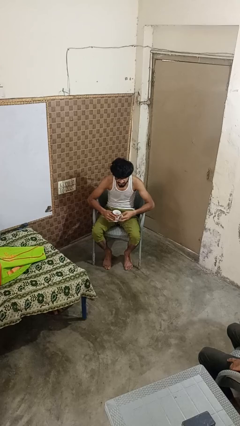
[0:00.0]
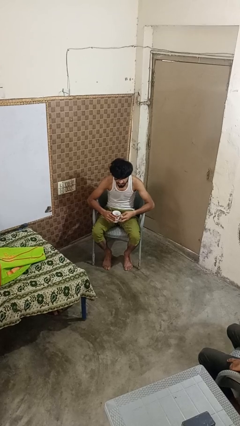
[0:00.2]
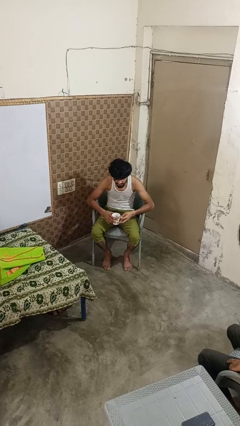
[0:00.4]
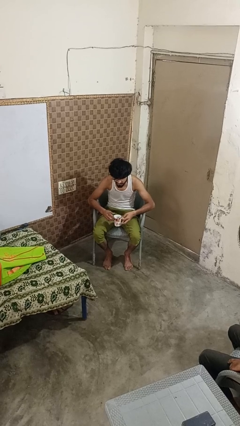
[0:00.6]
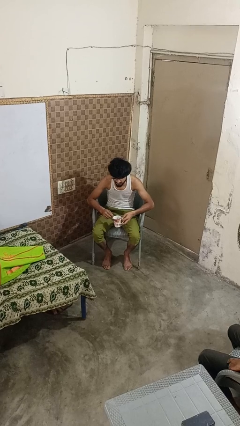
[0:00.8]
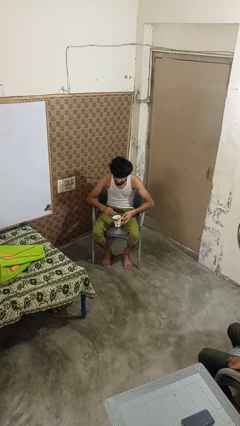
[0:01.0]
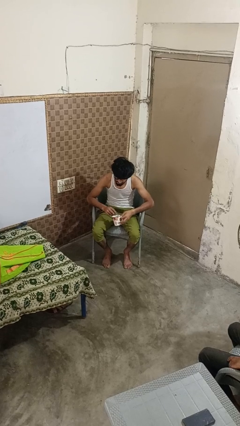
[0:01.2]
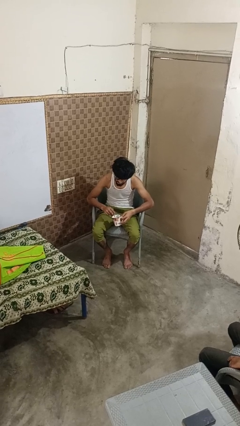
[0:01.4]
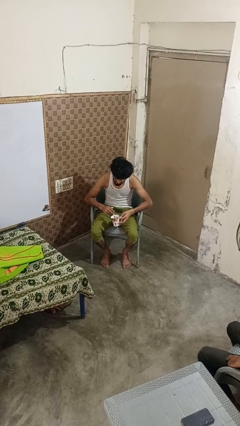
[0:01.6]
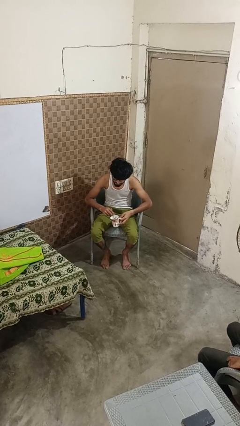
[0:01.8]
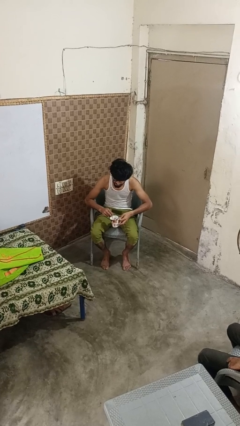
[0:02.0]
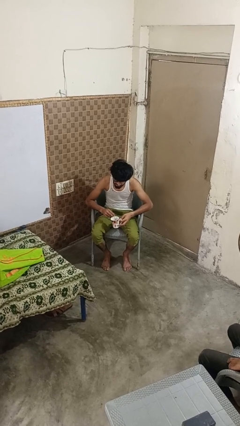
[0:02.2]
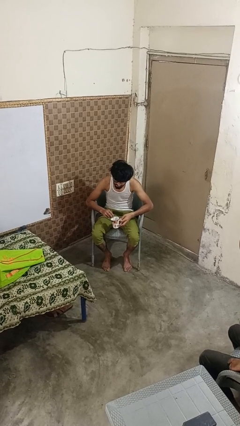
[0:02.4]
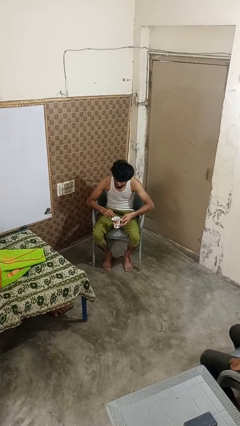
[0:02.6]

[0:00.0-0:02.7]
person stirs mug

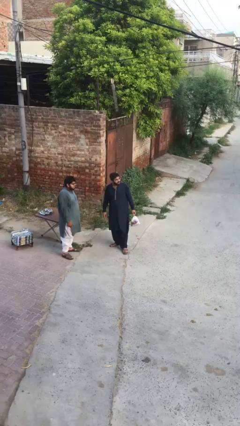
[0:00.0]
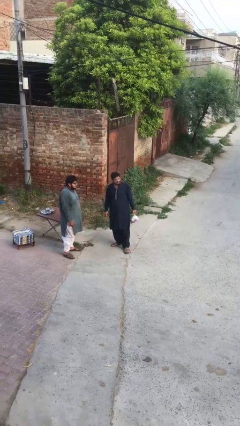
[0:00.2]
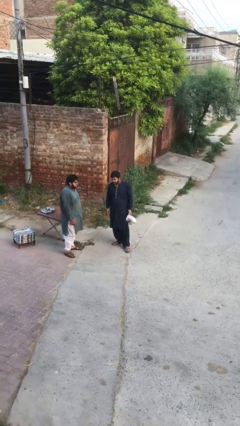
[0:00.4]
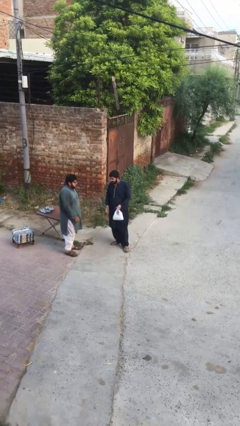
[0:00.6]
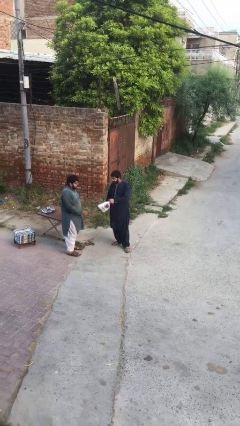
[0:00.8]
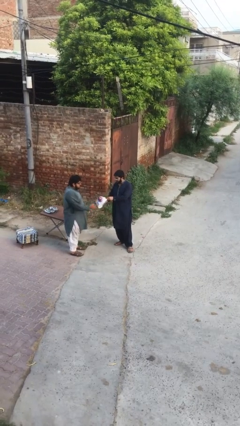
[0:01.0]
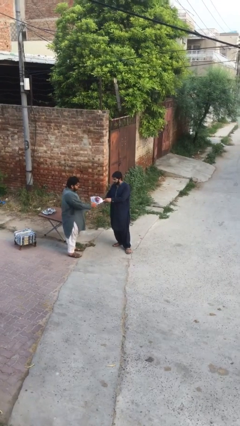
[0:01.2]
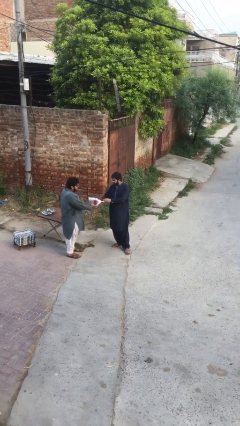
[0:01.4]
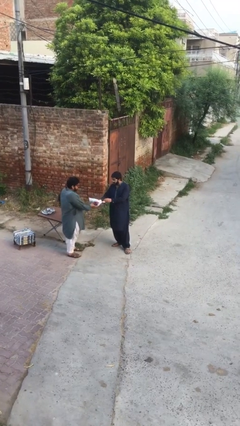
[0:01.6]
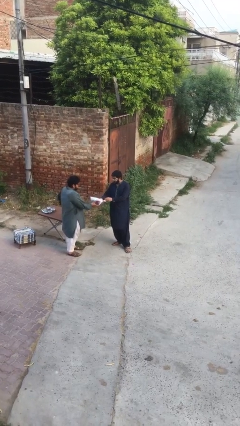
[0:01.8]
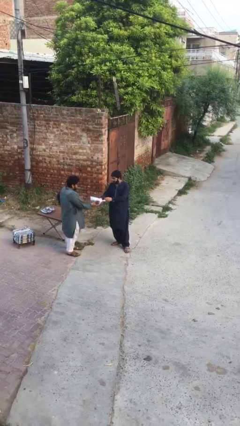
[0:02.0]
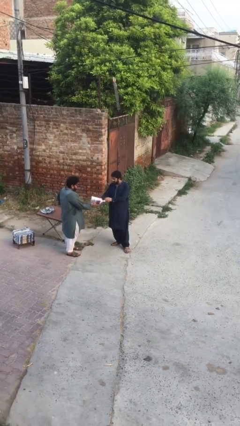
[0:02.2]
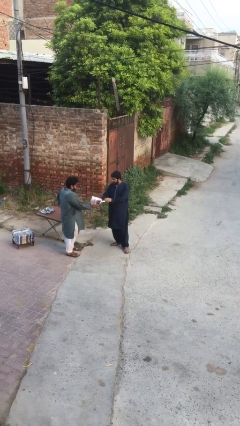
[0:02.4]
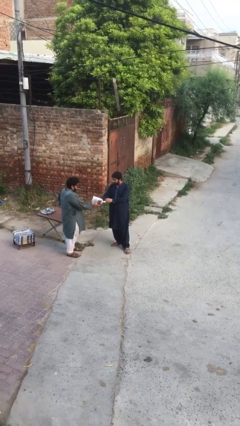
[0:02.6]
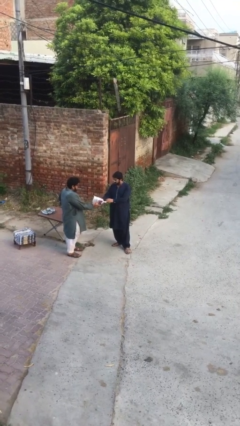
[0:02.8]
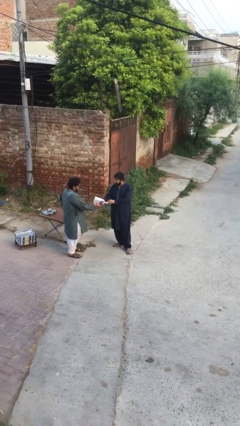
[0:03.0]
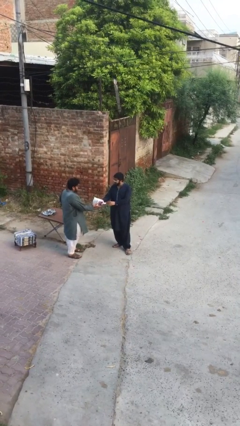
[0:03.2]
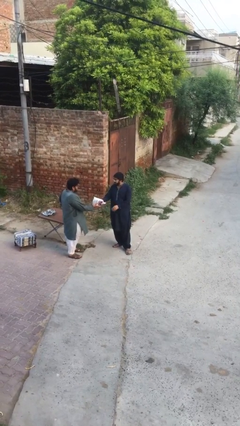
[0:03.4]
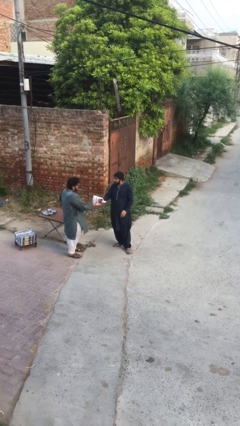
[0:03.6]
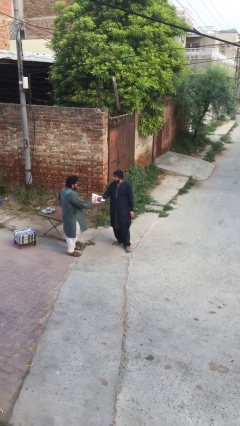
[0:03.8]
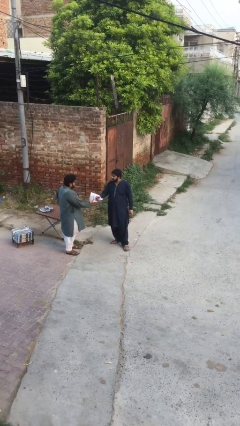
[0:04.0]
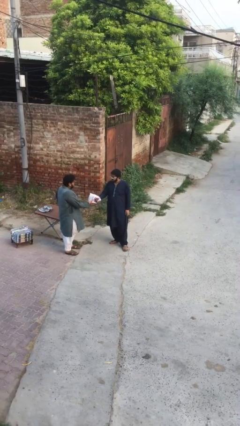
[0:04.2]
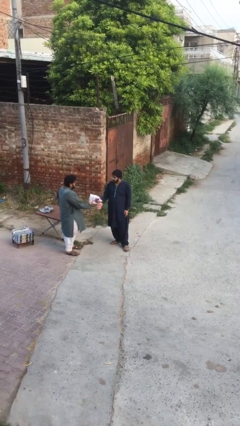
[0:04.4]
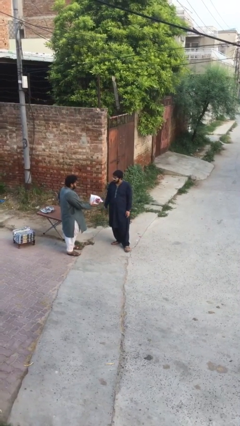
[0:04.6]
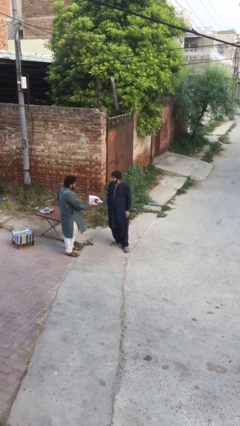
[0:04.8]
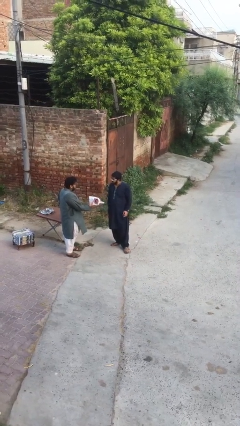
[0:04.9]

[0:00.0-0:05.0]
person transfers object to person

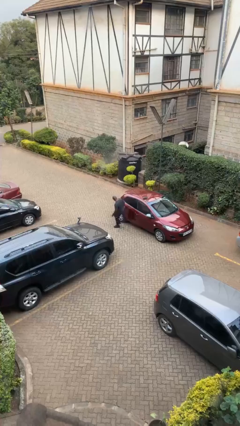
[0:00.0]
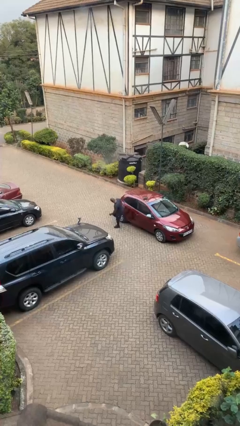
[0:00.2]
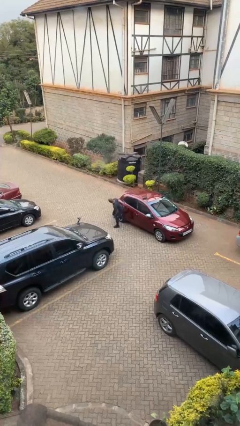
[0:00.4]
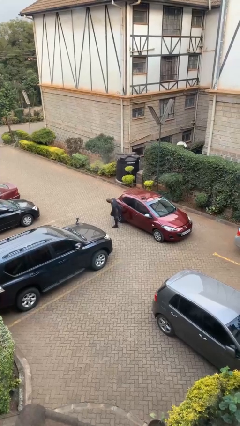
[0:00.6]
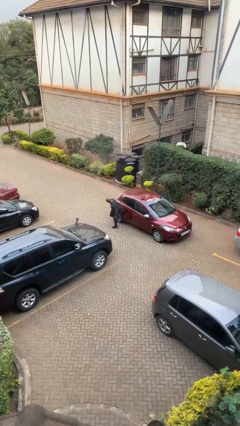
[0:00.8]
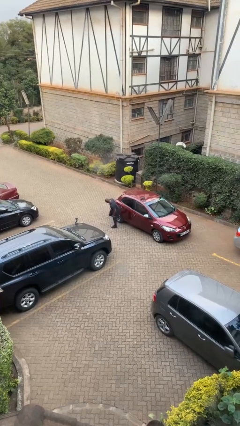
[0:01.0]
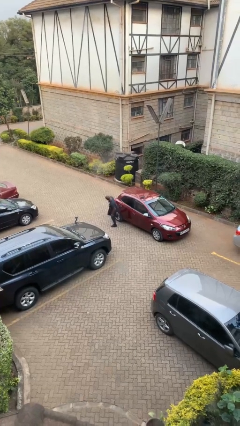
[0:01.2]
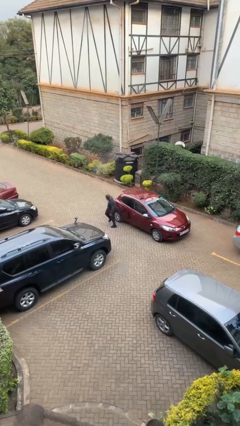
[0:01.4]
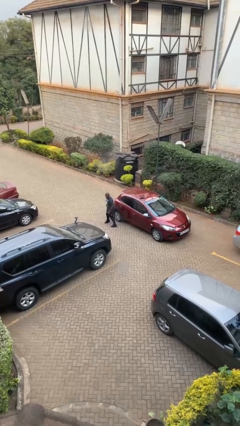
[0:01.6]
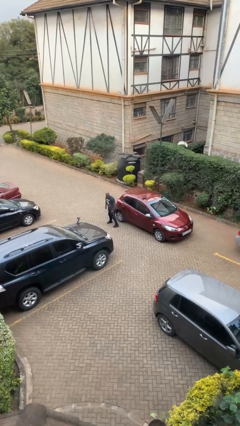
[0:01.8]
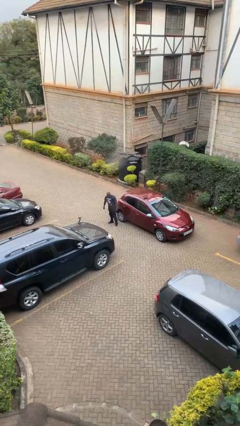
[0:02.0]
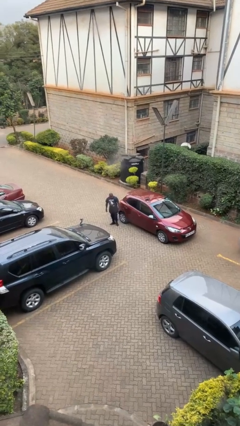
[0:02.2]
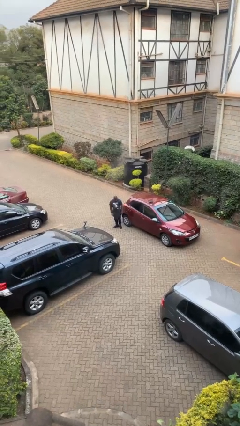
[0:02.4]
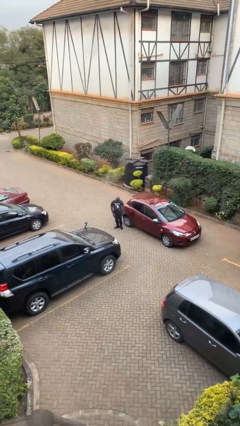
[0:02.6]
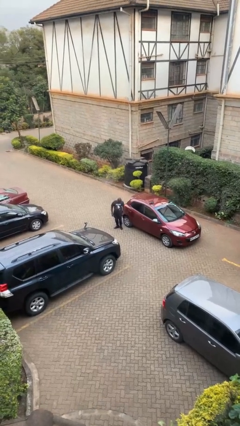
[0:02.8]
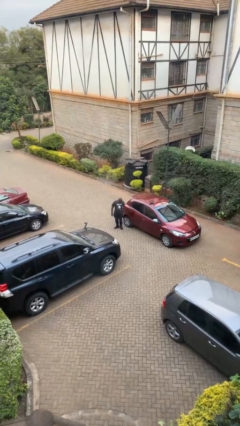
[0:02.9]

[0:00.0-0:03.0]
person kicks car tires

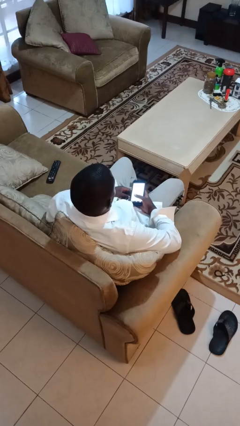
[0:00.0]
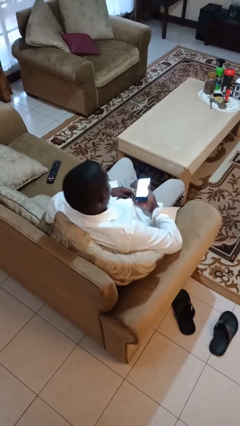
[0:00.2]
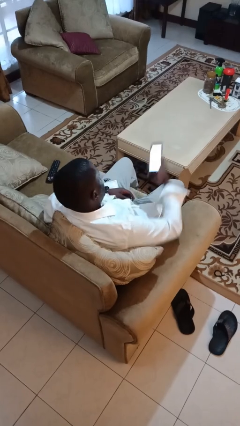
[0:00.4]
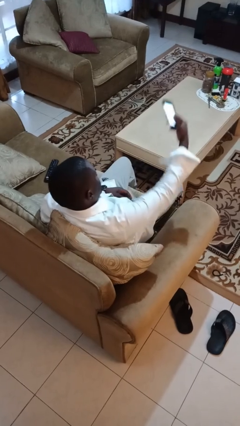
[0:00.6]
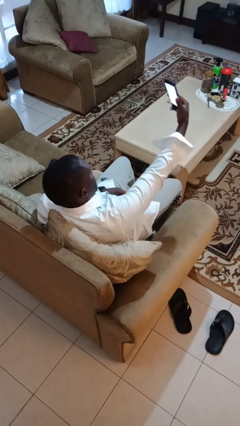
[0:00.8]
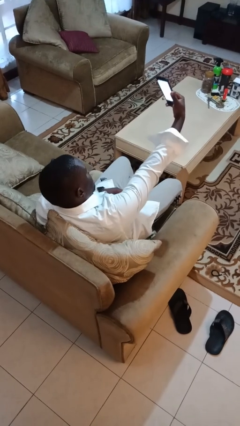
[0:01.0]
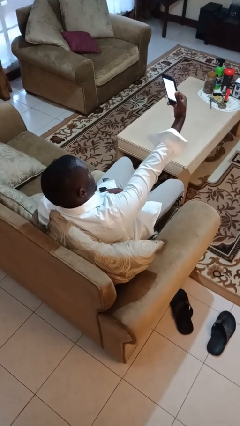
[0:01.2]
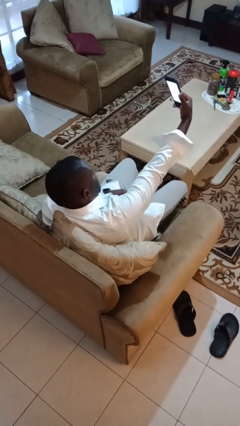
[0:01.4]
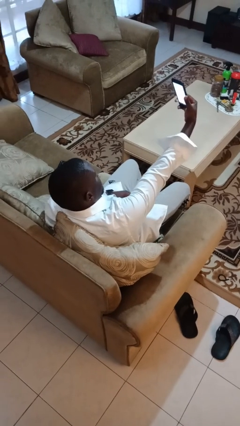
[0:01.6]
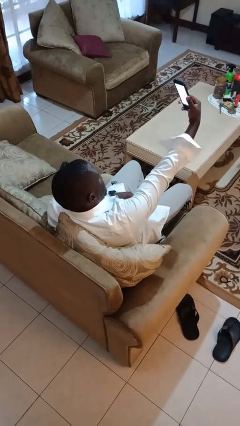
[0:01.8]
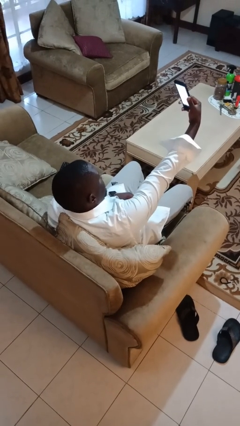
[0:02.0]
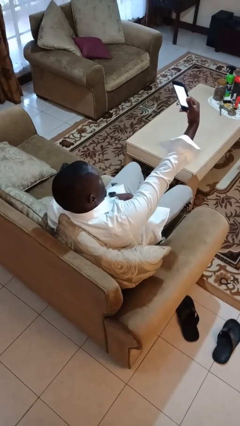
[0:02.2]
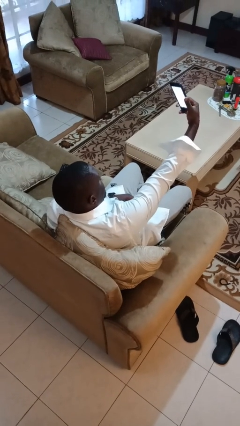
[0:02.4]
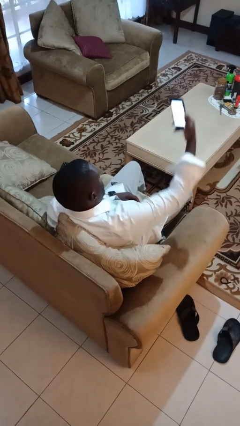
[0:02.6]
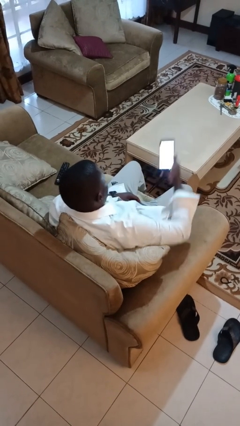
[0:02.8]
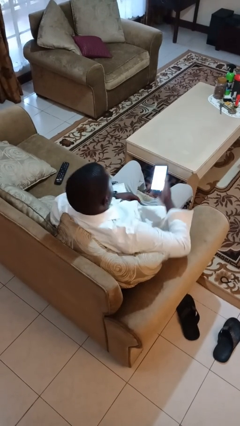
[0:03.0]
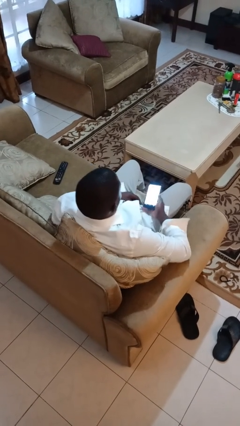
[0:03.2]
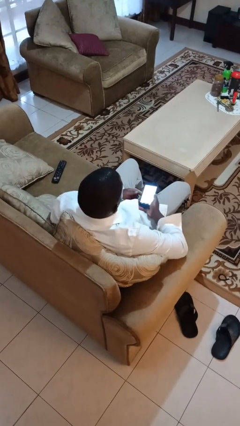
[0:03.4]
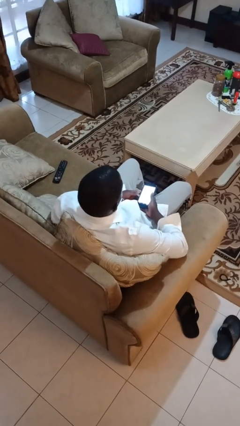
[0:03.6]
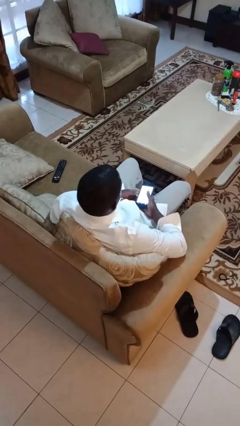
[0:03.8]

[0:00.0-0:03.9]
person takes selfie

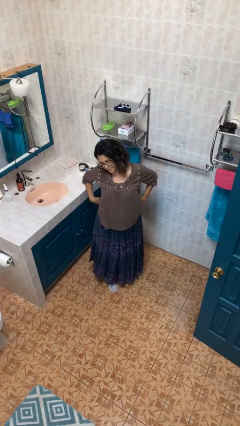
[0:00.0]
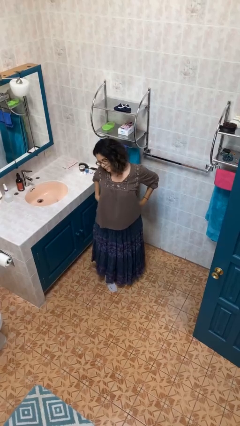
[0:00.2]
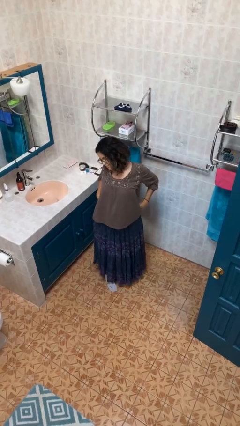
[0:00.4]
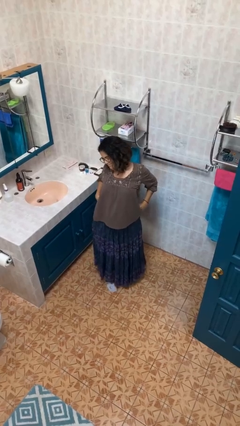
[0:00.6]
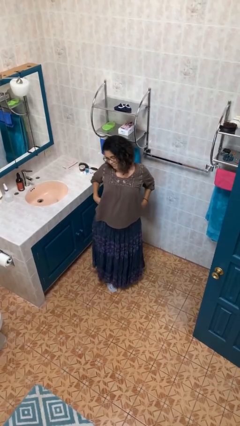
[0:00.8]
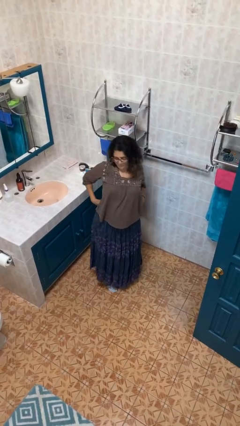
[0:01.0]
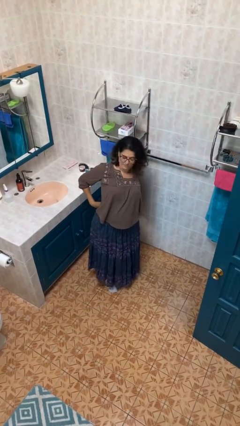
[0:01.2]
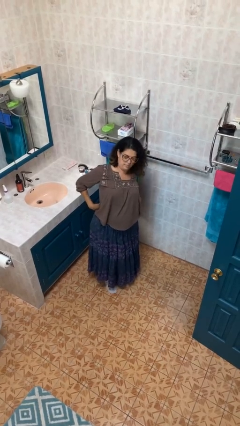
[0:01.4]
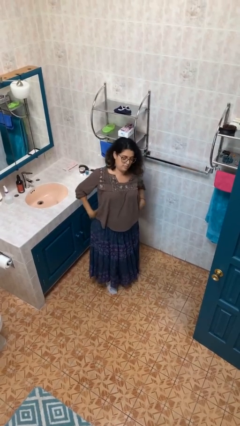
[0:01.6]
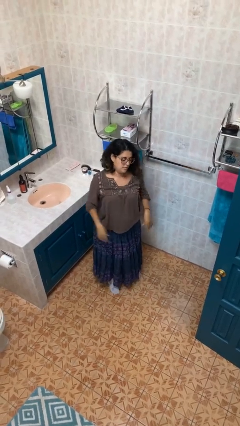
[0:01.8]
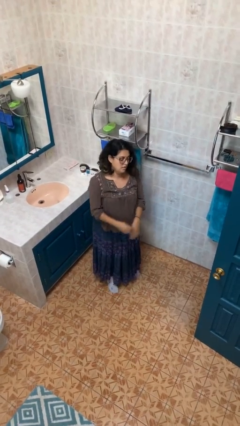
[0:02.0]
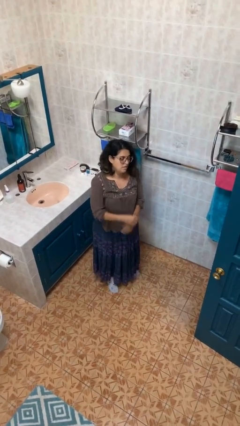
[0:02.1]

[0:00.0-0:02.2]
person stretches back

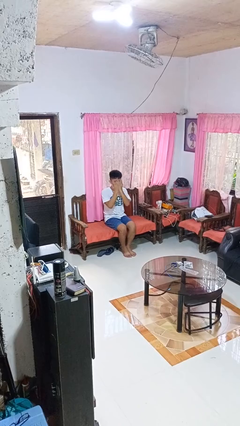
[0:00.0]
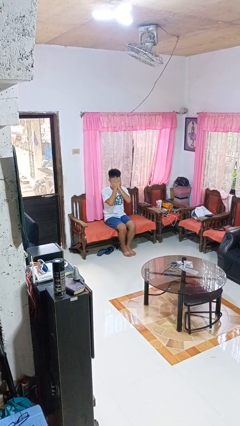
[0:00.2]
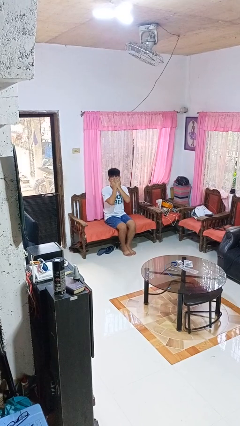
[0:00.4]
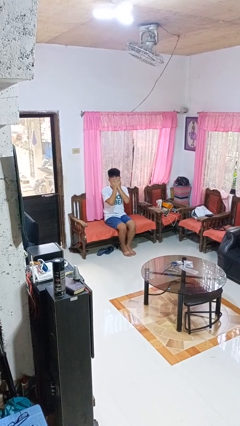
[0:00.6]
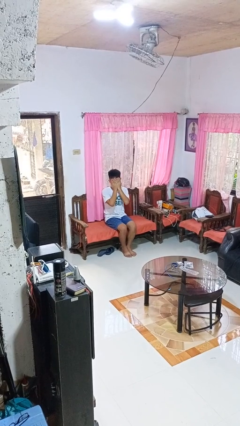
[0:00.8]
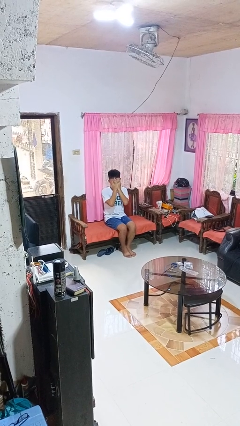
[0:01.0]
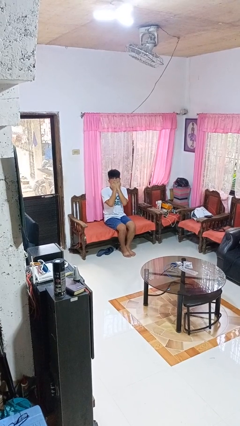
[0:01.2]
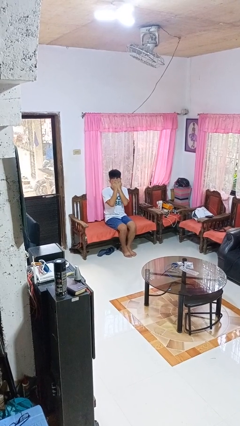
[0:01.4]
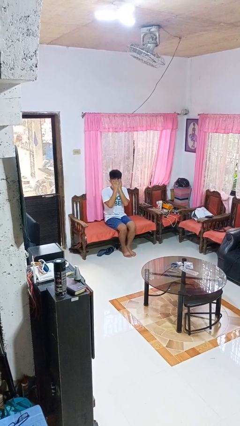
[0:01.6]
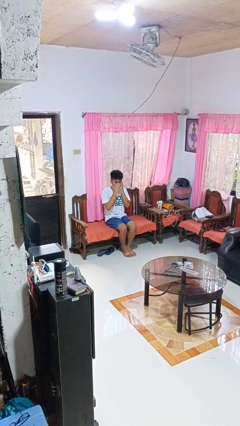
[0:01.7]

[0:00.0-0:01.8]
person covers face with hands
